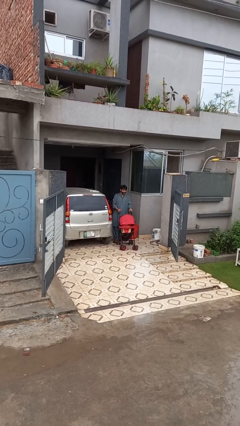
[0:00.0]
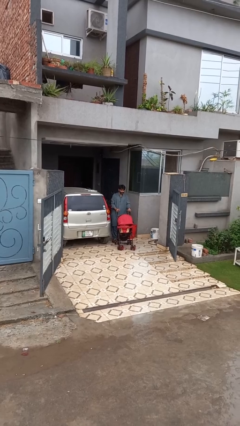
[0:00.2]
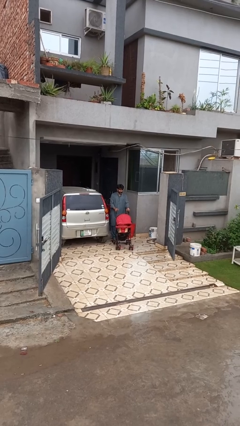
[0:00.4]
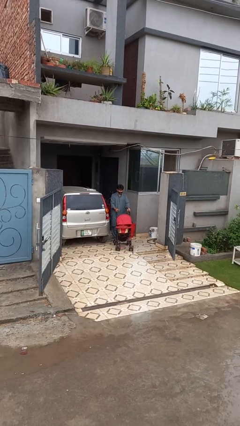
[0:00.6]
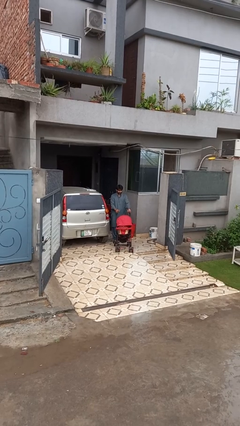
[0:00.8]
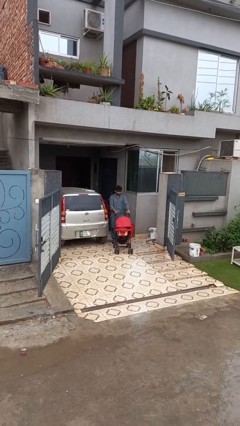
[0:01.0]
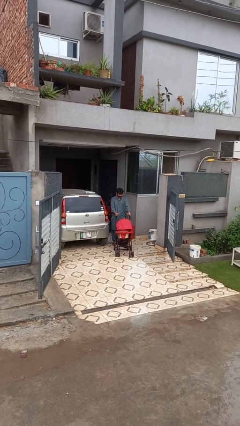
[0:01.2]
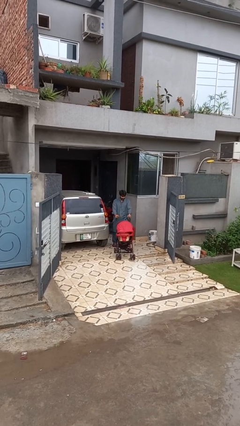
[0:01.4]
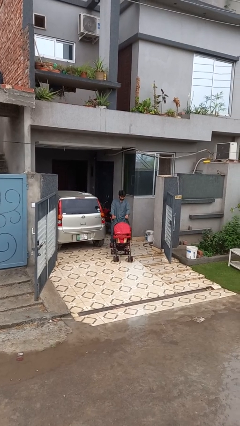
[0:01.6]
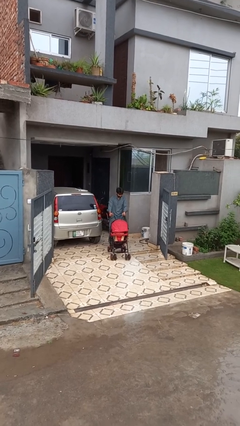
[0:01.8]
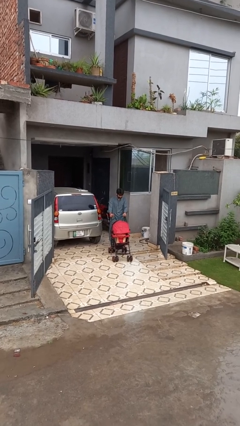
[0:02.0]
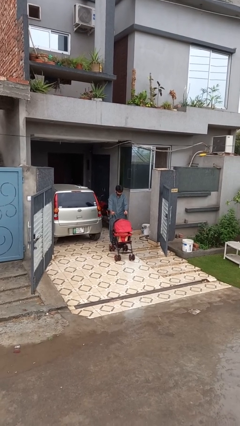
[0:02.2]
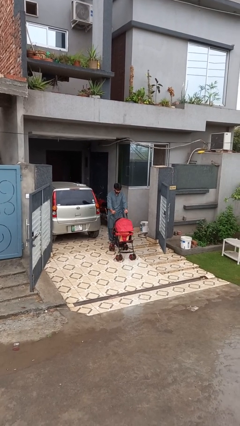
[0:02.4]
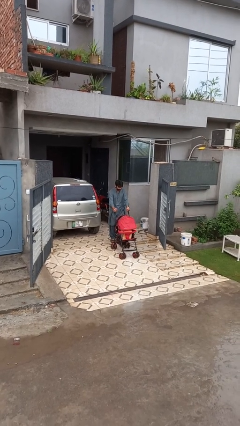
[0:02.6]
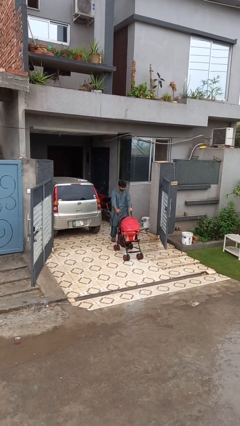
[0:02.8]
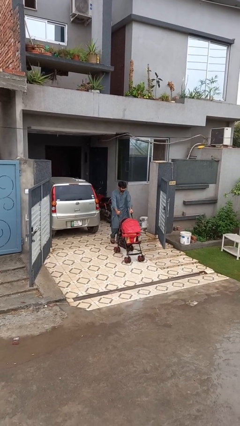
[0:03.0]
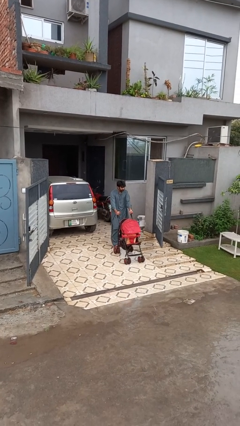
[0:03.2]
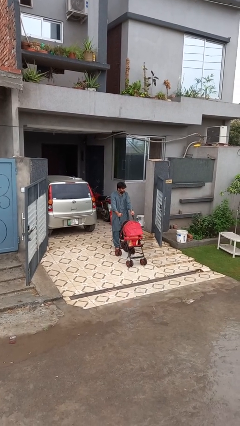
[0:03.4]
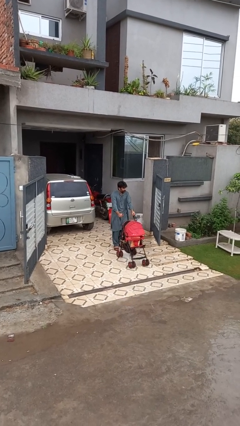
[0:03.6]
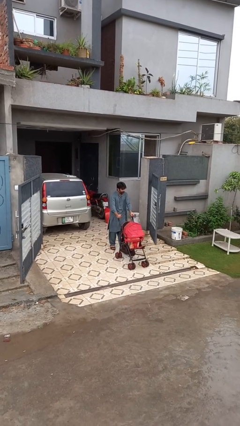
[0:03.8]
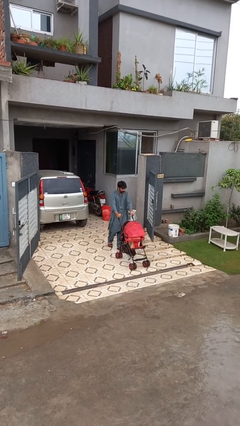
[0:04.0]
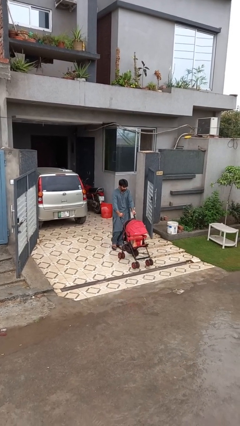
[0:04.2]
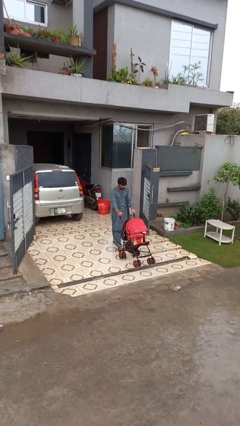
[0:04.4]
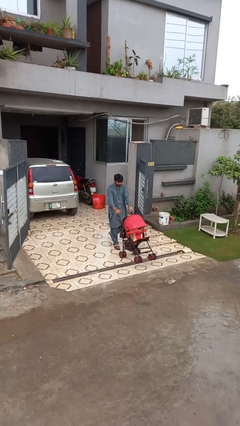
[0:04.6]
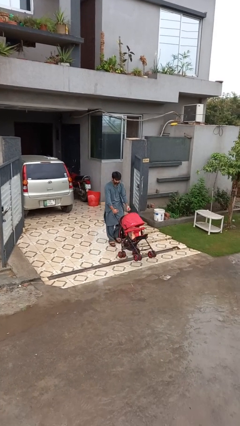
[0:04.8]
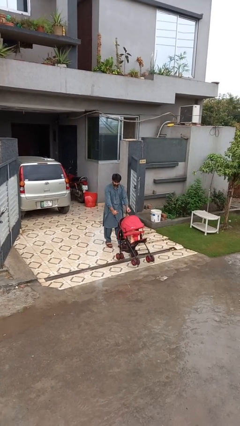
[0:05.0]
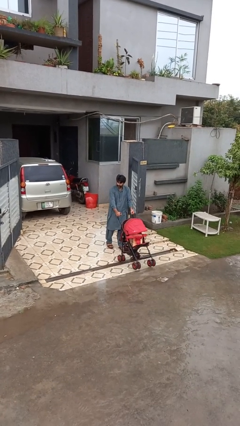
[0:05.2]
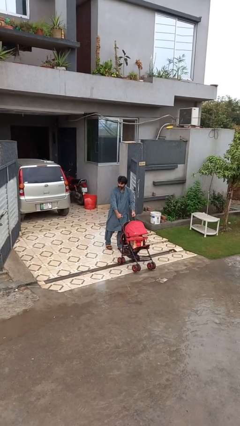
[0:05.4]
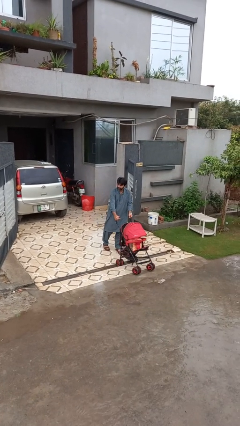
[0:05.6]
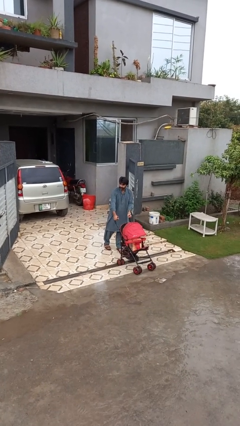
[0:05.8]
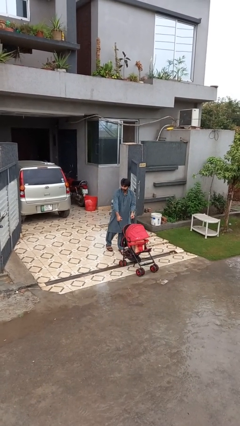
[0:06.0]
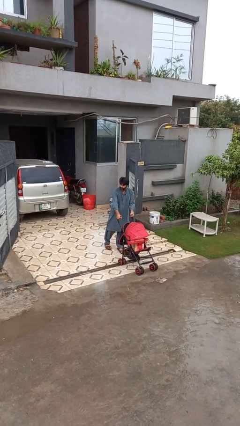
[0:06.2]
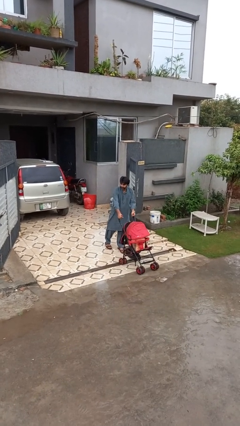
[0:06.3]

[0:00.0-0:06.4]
person pushes wheeled cart

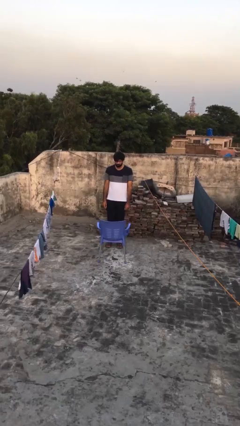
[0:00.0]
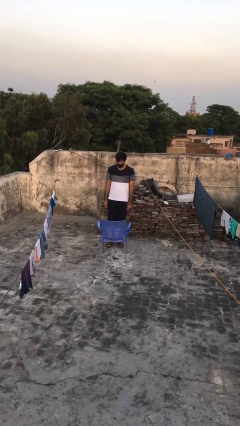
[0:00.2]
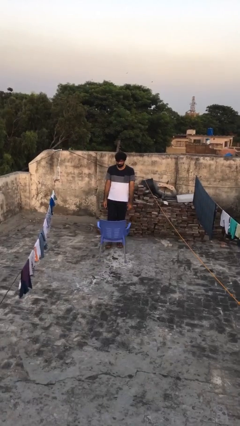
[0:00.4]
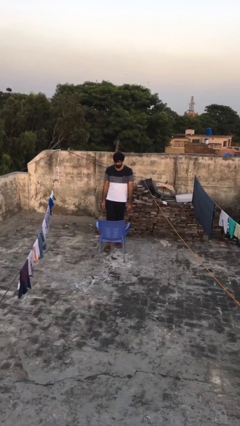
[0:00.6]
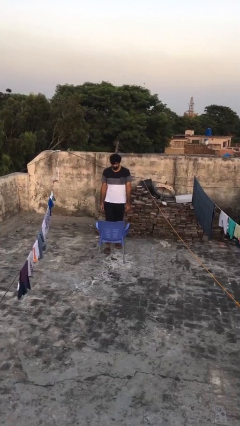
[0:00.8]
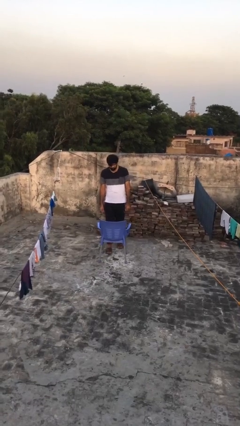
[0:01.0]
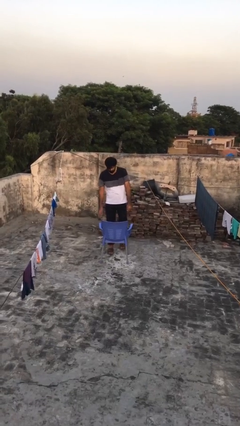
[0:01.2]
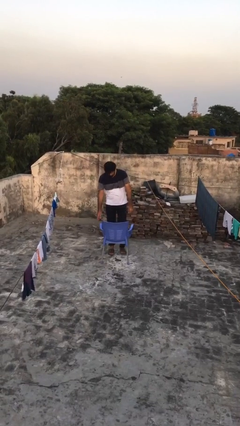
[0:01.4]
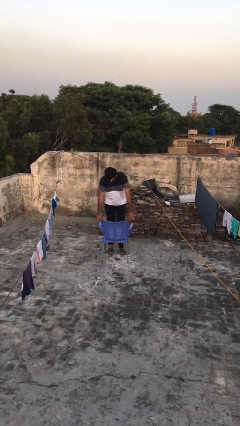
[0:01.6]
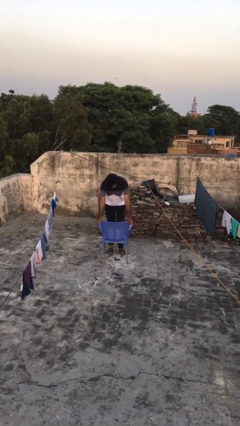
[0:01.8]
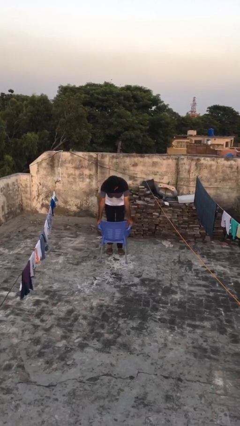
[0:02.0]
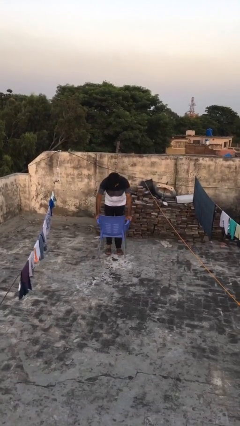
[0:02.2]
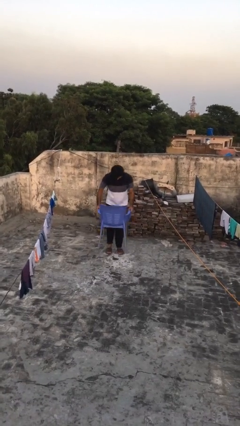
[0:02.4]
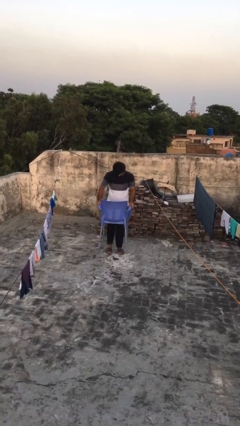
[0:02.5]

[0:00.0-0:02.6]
person picks up object from floor

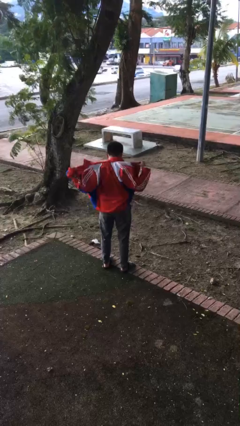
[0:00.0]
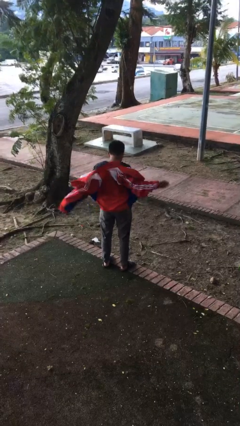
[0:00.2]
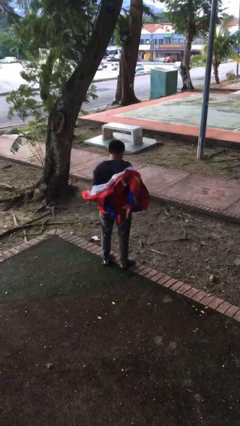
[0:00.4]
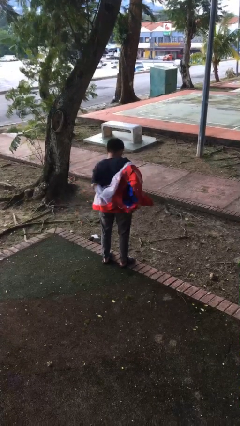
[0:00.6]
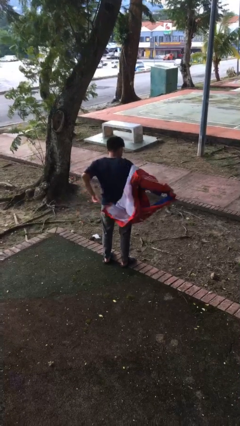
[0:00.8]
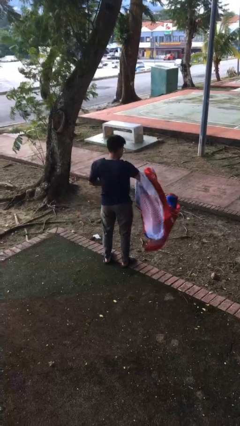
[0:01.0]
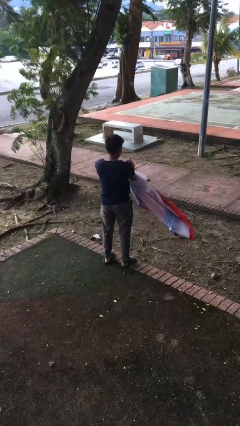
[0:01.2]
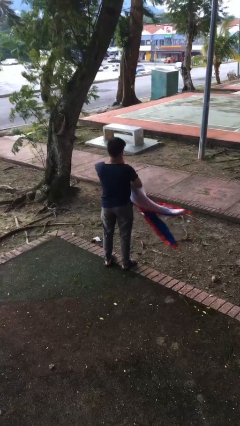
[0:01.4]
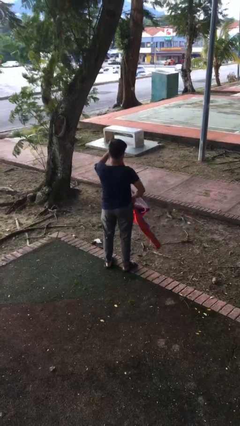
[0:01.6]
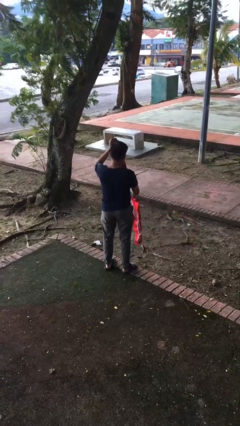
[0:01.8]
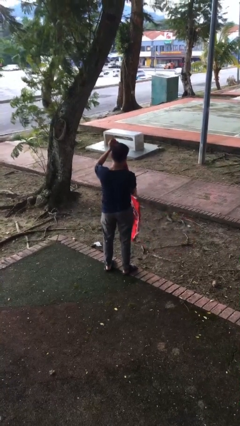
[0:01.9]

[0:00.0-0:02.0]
person takes off jacket

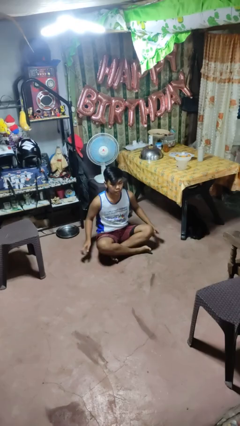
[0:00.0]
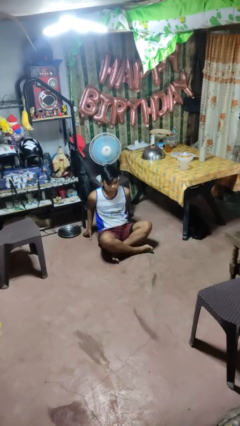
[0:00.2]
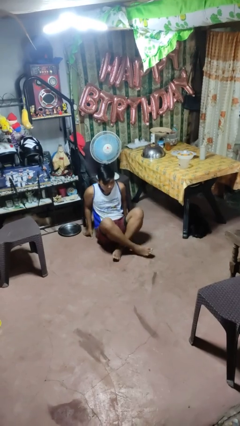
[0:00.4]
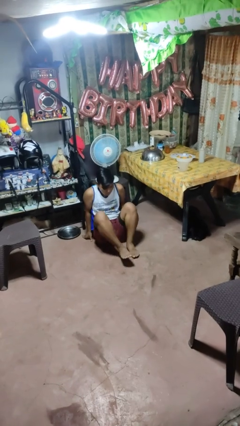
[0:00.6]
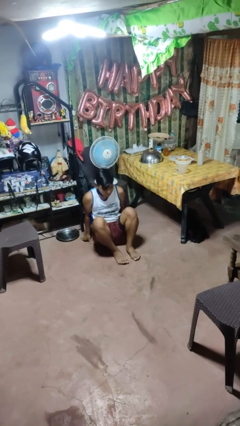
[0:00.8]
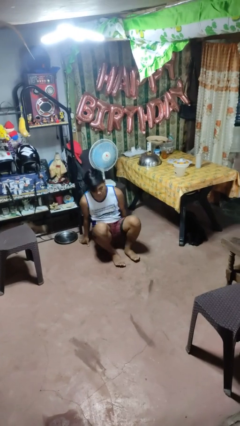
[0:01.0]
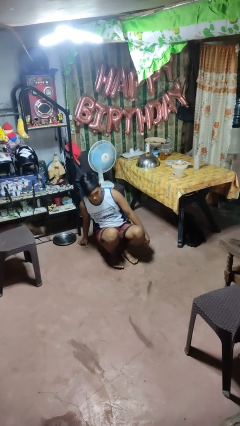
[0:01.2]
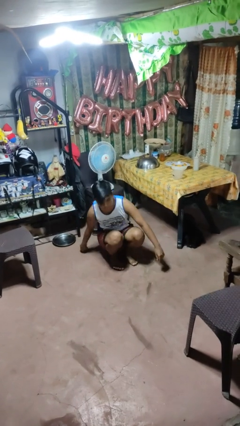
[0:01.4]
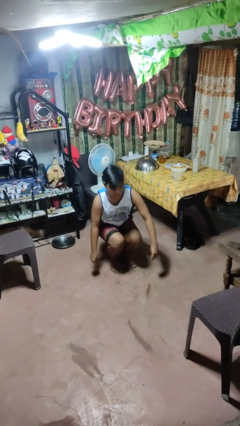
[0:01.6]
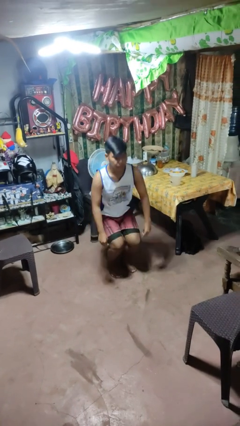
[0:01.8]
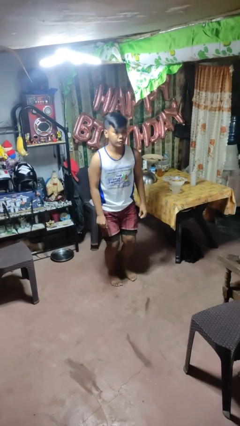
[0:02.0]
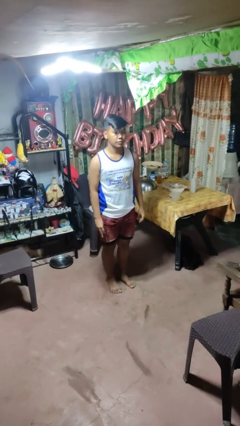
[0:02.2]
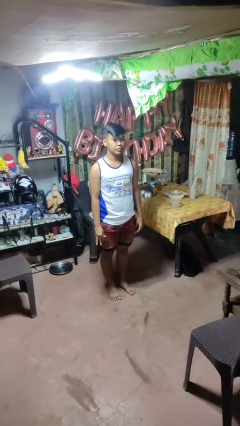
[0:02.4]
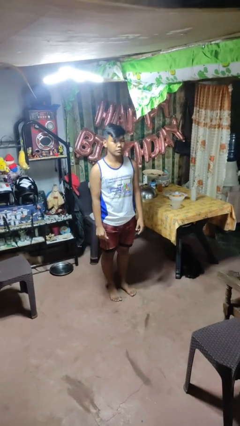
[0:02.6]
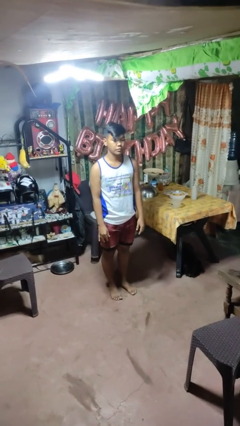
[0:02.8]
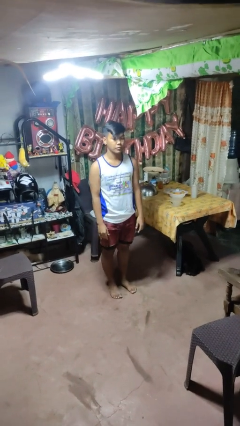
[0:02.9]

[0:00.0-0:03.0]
person stands up from floor

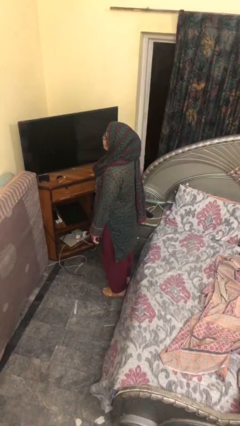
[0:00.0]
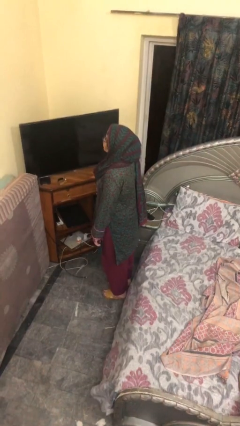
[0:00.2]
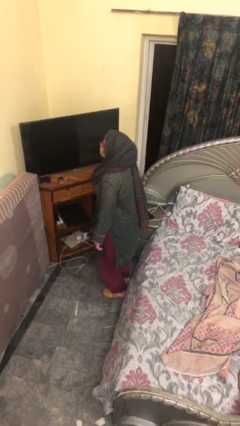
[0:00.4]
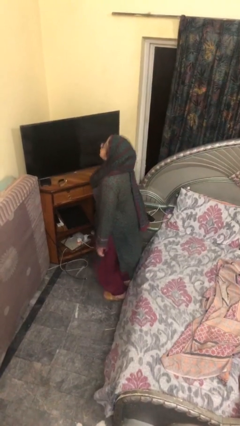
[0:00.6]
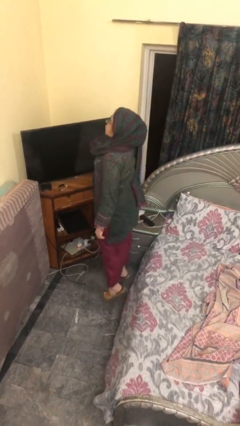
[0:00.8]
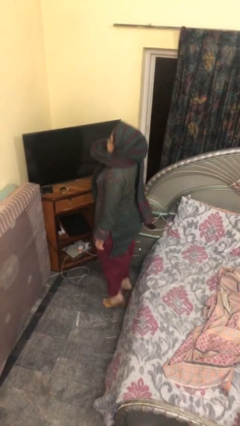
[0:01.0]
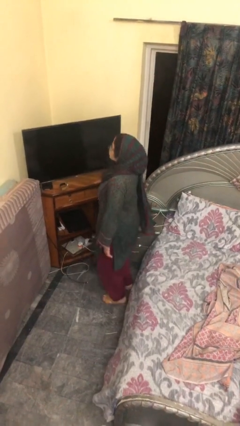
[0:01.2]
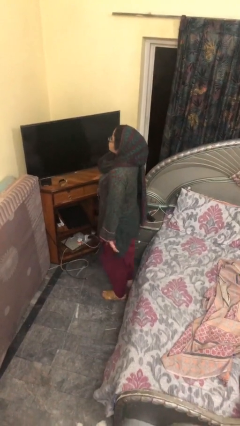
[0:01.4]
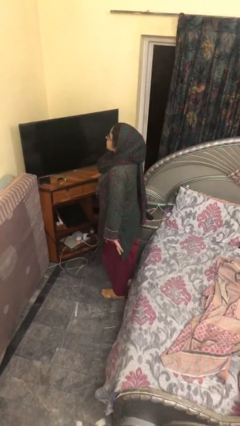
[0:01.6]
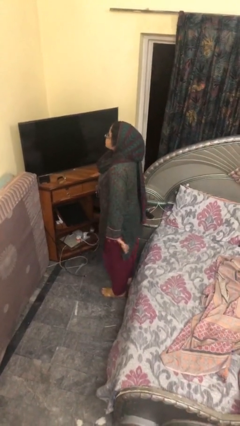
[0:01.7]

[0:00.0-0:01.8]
person jumps

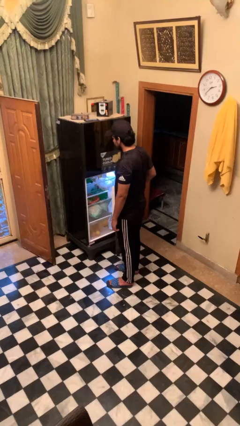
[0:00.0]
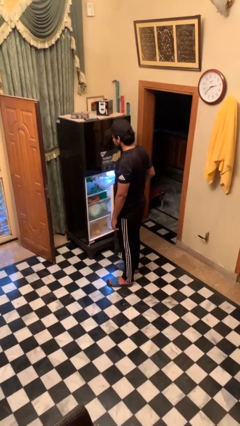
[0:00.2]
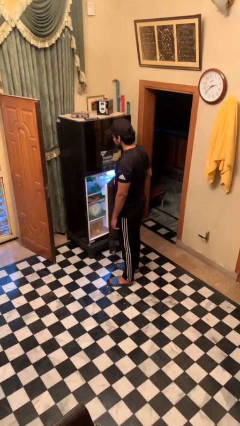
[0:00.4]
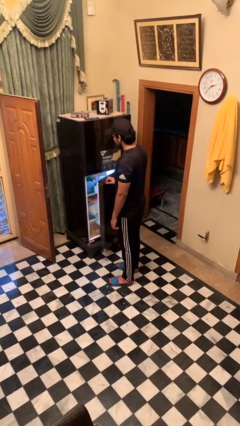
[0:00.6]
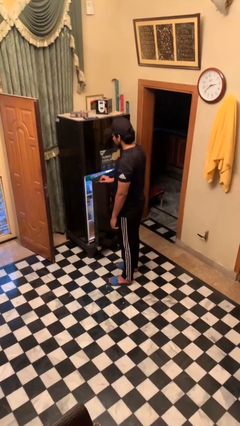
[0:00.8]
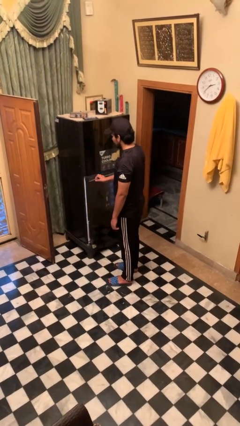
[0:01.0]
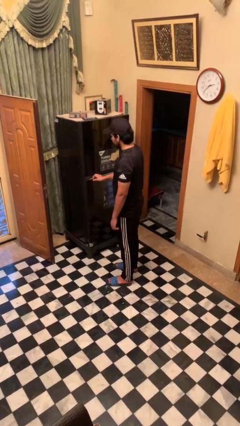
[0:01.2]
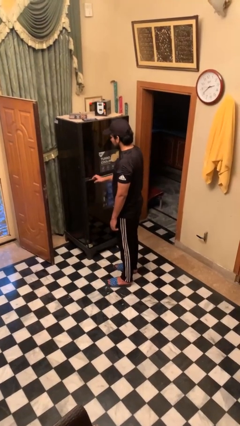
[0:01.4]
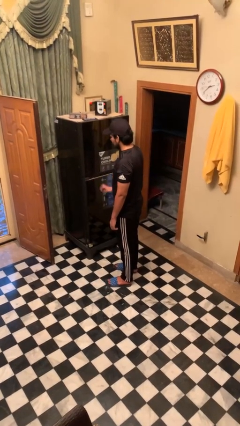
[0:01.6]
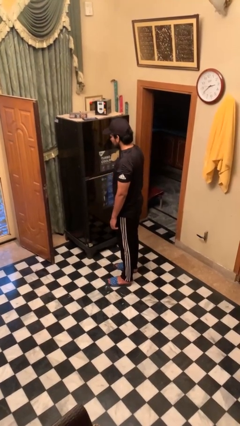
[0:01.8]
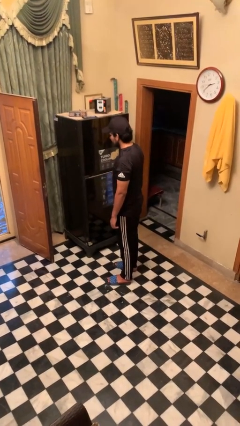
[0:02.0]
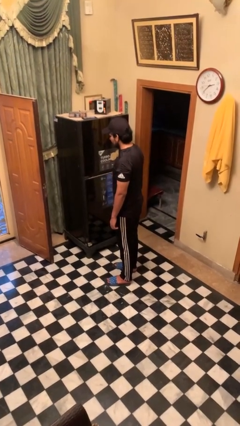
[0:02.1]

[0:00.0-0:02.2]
person closes refrigerator
